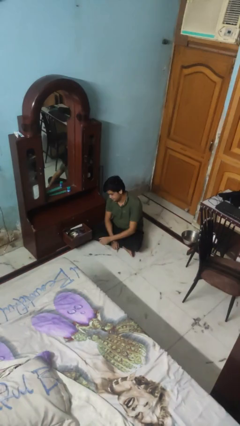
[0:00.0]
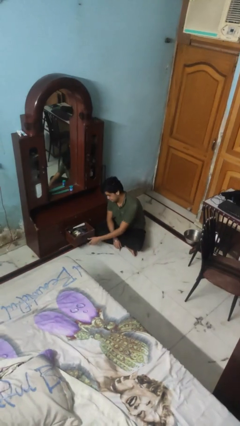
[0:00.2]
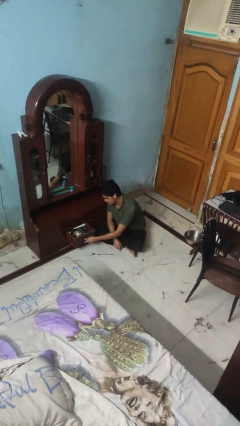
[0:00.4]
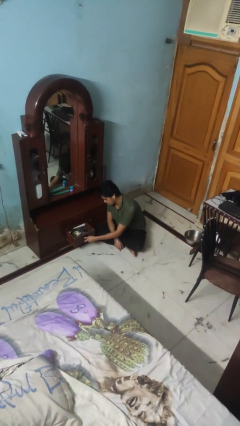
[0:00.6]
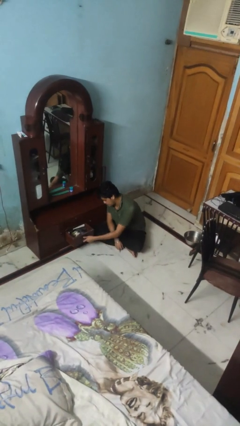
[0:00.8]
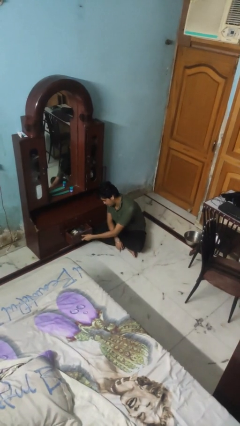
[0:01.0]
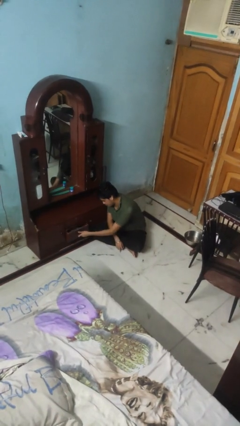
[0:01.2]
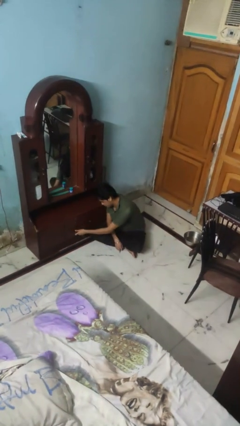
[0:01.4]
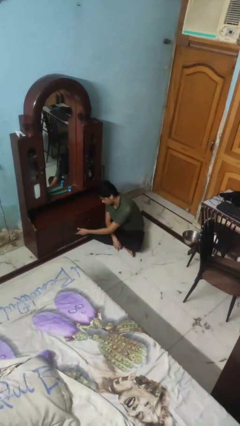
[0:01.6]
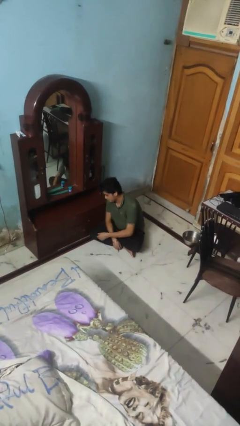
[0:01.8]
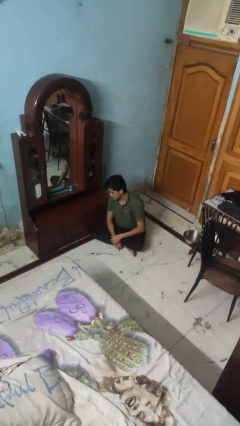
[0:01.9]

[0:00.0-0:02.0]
person closes dresser drawer

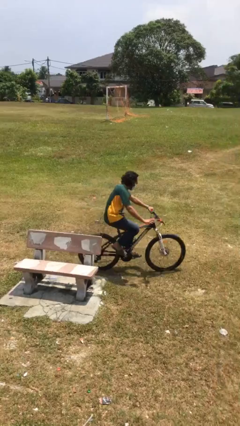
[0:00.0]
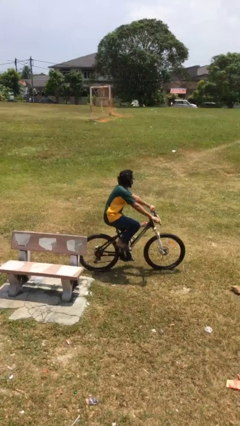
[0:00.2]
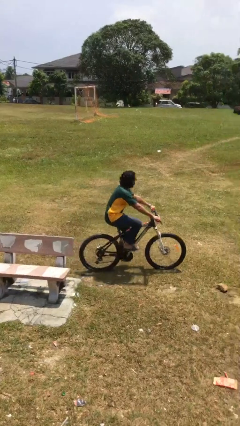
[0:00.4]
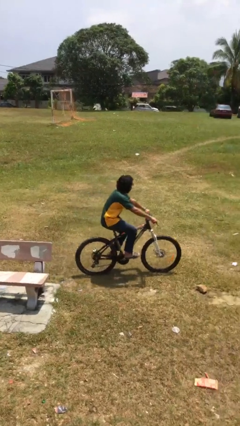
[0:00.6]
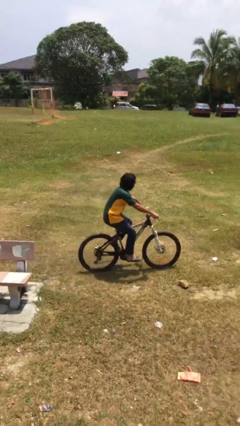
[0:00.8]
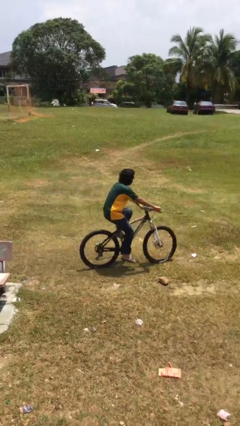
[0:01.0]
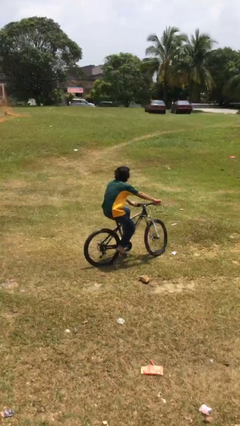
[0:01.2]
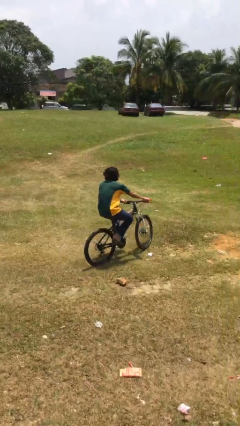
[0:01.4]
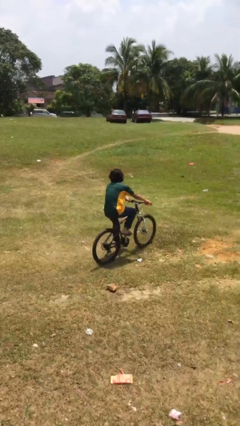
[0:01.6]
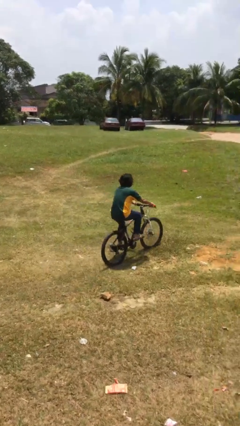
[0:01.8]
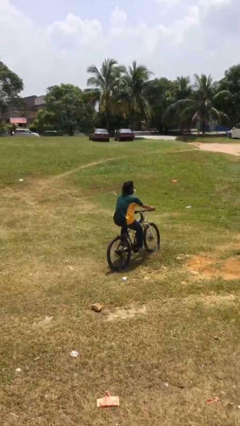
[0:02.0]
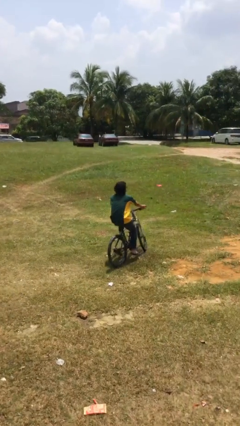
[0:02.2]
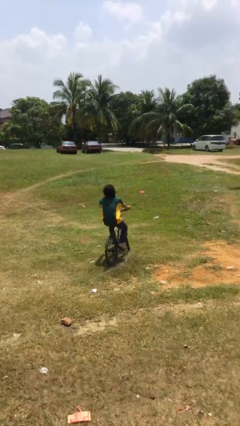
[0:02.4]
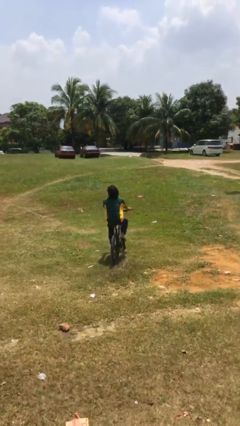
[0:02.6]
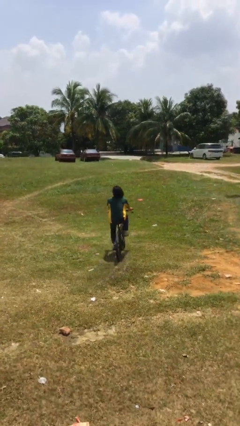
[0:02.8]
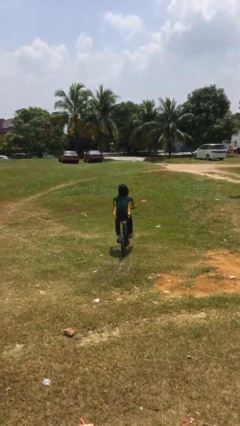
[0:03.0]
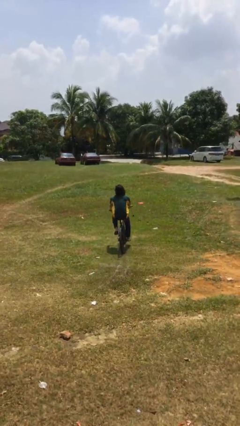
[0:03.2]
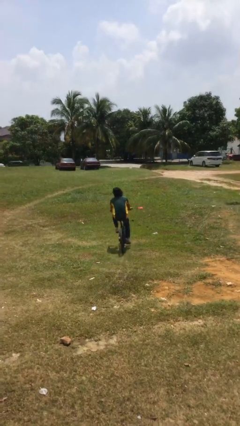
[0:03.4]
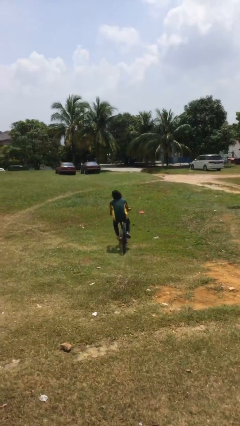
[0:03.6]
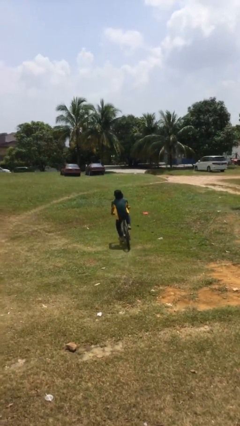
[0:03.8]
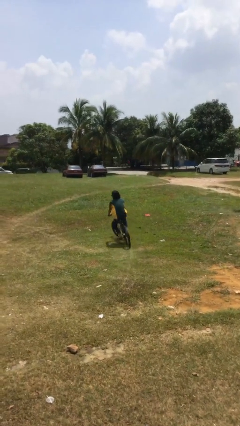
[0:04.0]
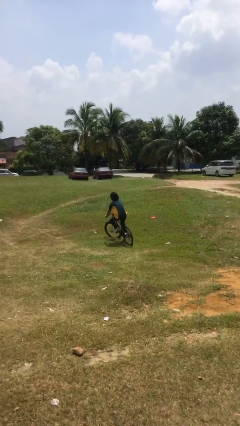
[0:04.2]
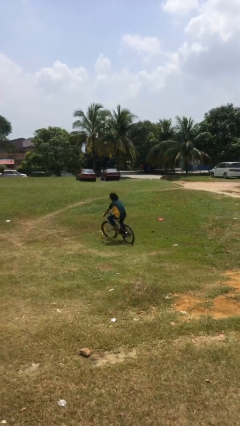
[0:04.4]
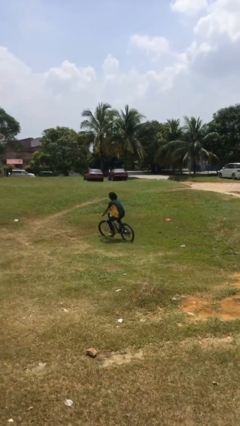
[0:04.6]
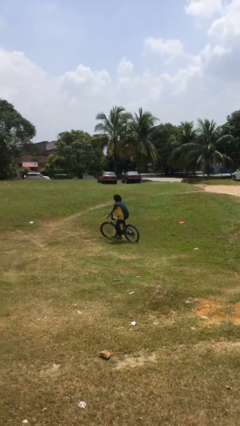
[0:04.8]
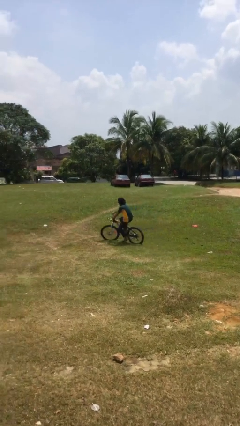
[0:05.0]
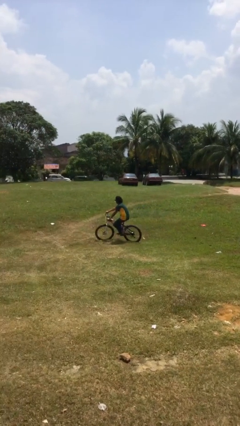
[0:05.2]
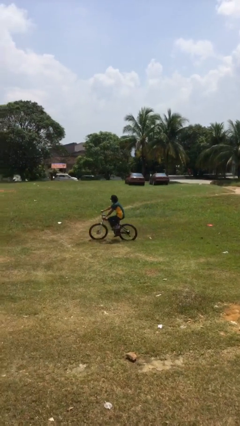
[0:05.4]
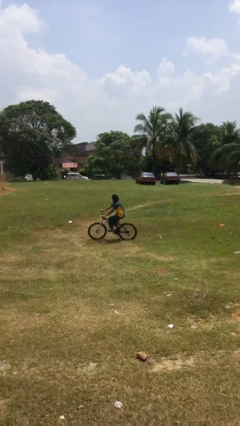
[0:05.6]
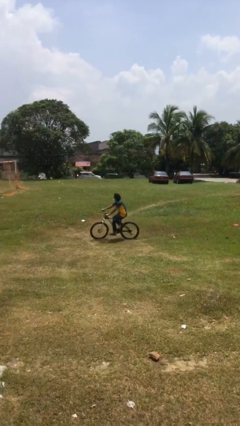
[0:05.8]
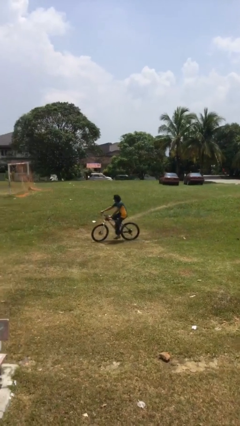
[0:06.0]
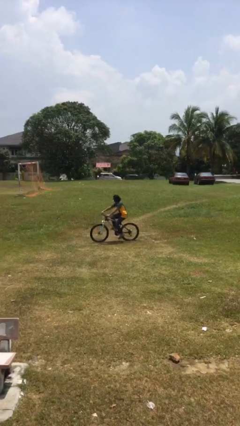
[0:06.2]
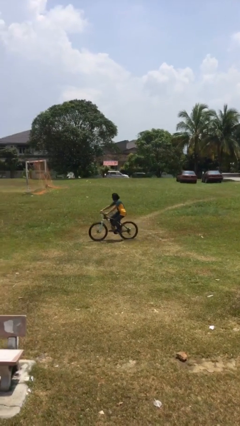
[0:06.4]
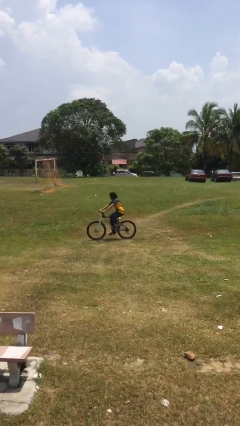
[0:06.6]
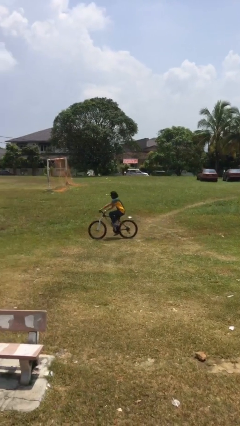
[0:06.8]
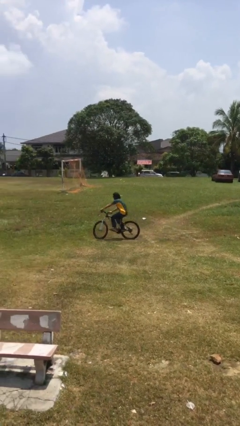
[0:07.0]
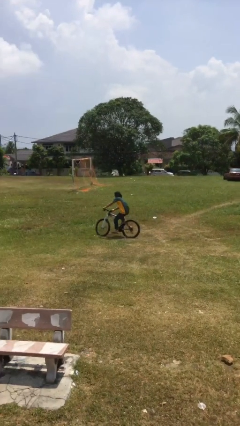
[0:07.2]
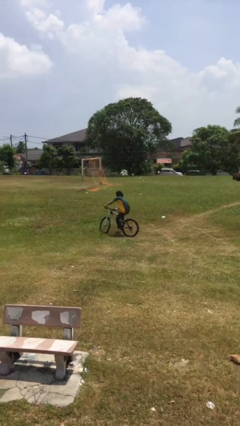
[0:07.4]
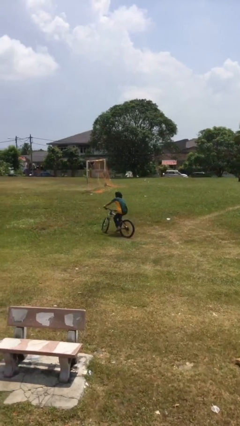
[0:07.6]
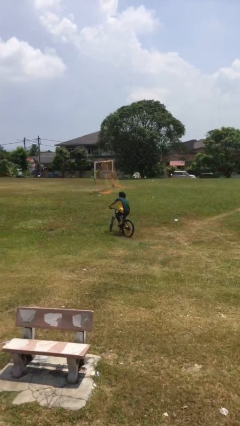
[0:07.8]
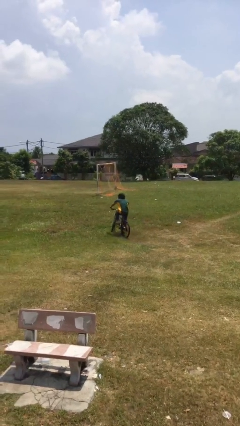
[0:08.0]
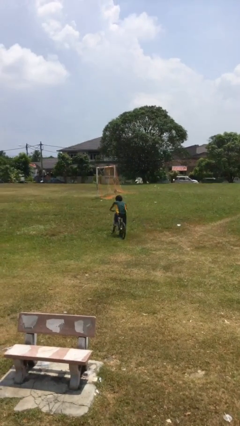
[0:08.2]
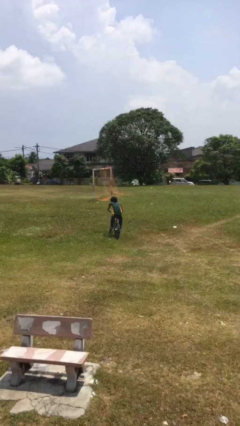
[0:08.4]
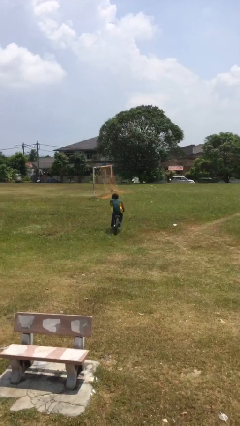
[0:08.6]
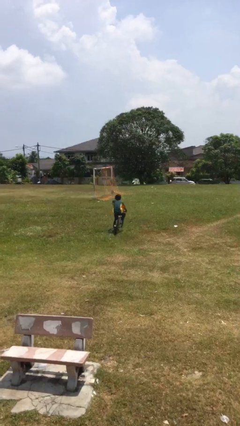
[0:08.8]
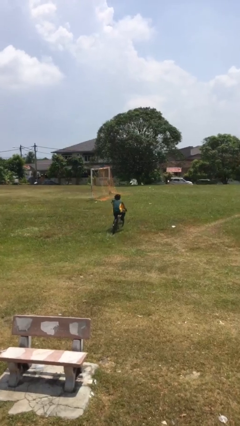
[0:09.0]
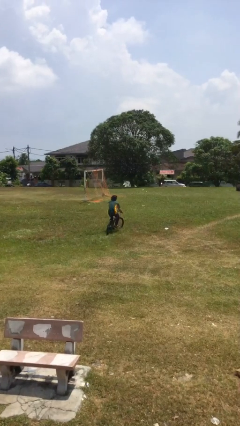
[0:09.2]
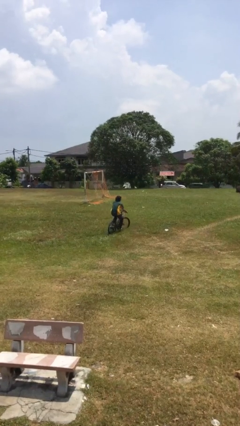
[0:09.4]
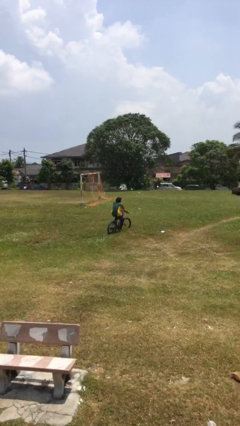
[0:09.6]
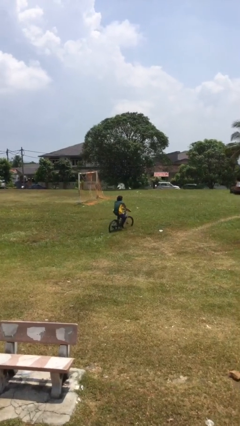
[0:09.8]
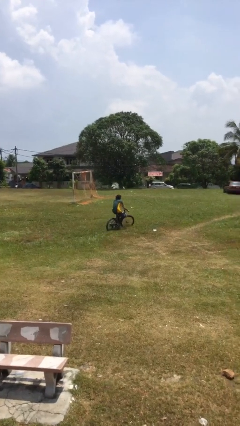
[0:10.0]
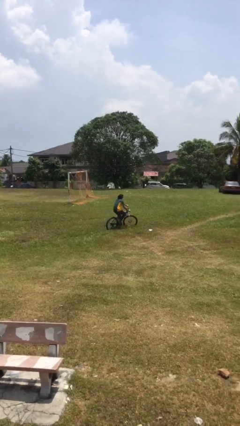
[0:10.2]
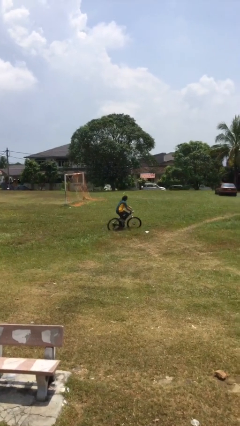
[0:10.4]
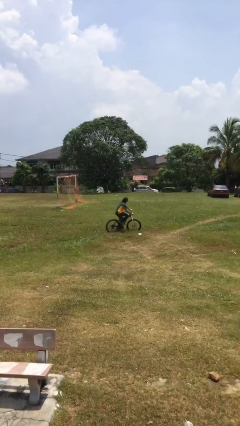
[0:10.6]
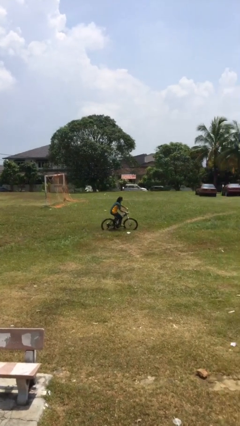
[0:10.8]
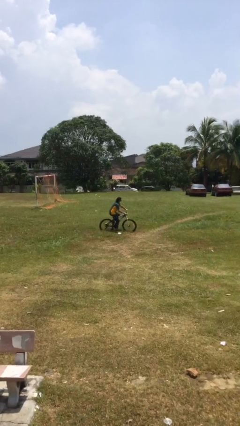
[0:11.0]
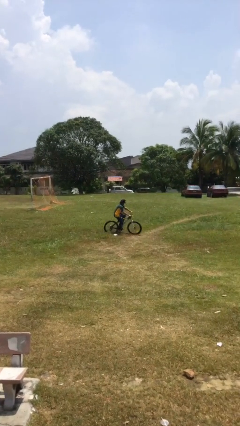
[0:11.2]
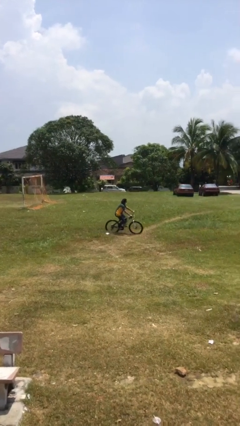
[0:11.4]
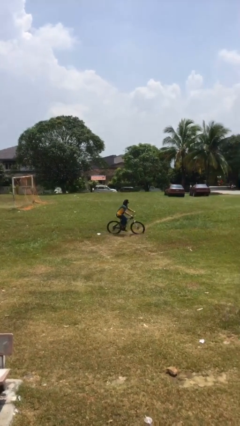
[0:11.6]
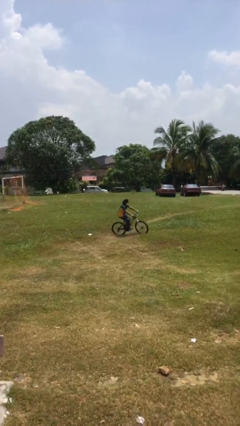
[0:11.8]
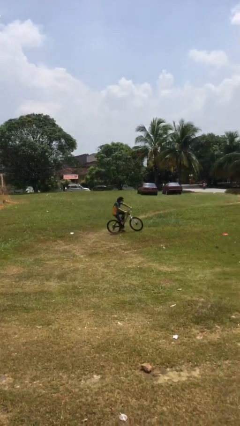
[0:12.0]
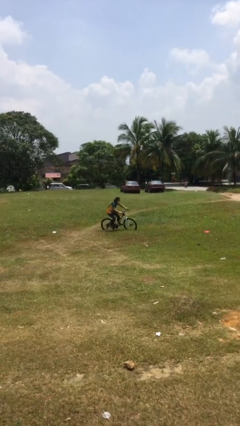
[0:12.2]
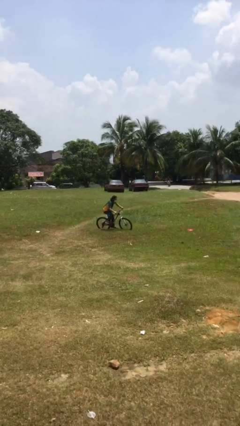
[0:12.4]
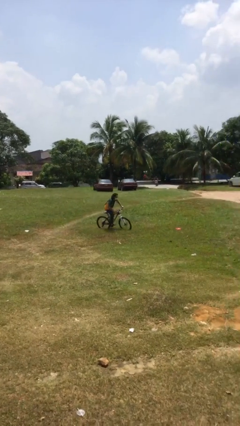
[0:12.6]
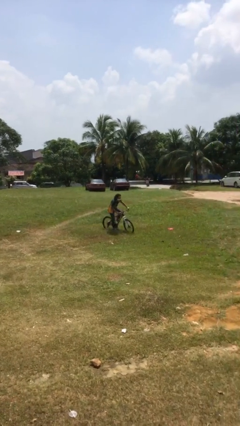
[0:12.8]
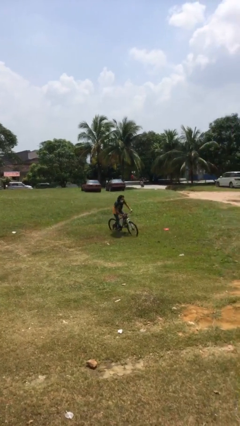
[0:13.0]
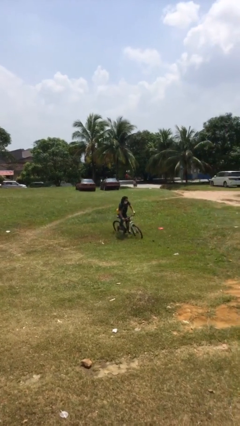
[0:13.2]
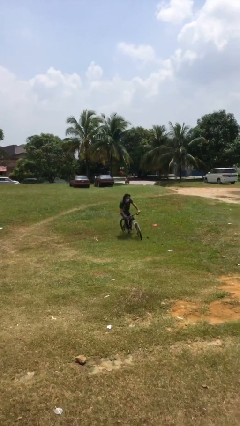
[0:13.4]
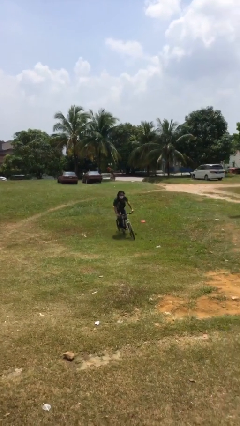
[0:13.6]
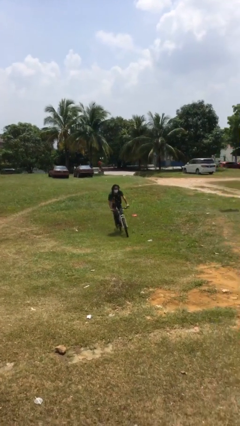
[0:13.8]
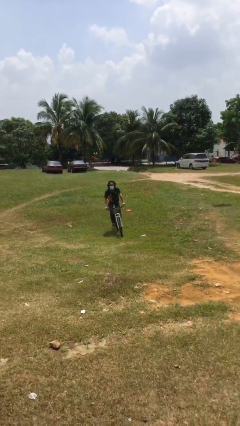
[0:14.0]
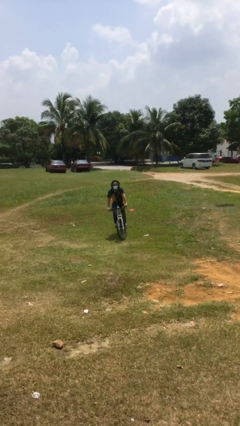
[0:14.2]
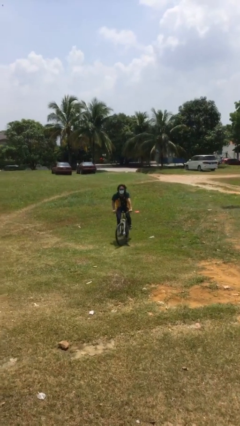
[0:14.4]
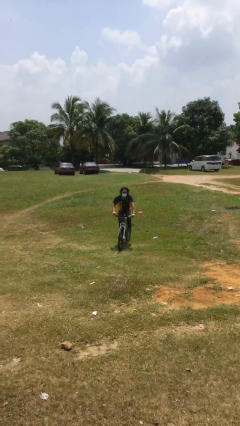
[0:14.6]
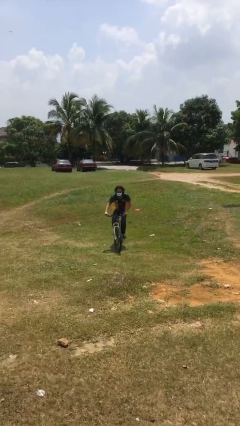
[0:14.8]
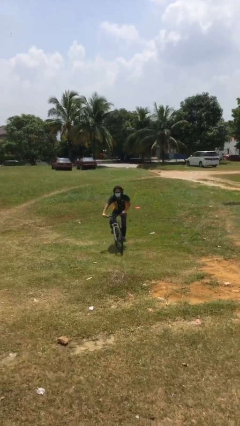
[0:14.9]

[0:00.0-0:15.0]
person rides bicycle

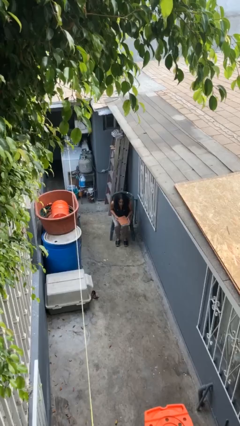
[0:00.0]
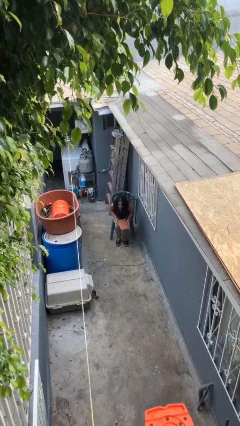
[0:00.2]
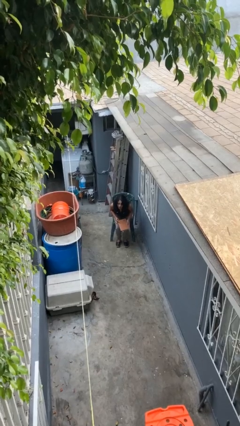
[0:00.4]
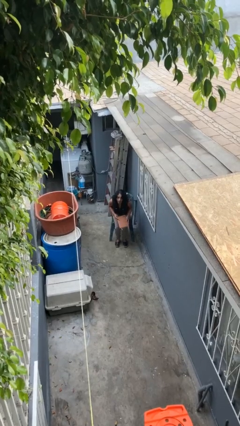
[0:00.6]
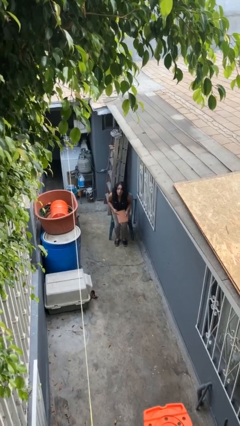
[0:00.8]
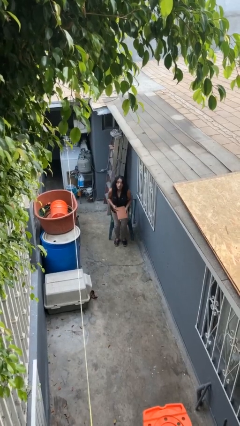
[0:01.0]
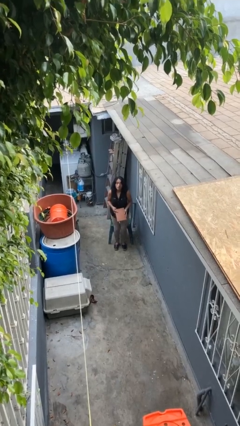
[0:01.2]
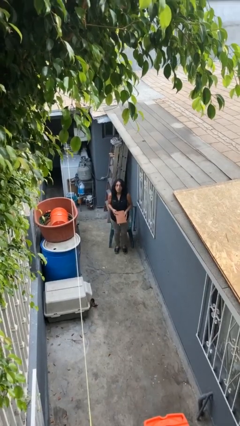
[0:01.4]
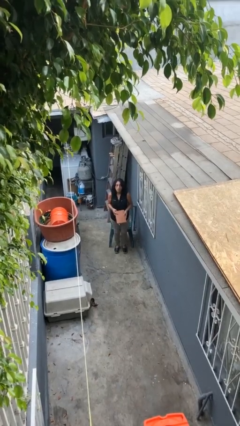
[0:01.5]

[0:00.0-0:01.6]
person stands up
